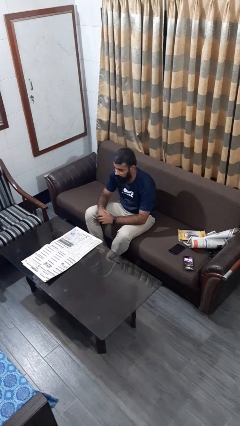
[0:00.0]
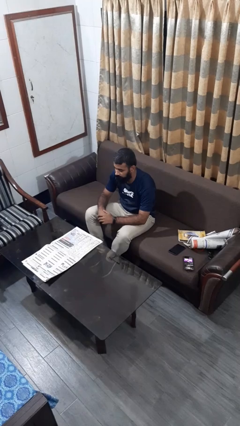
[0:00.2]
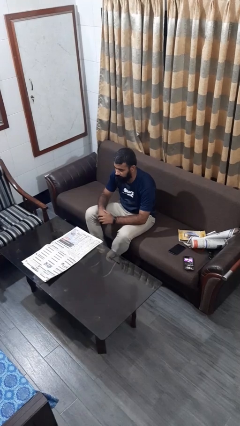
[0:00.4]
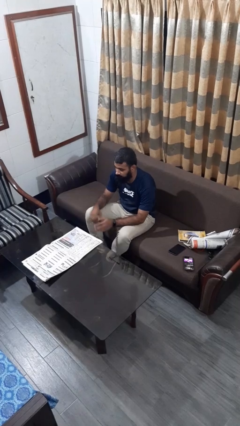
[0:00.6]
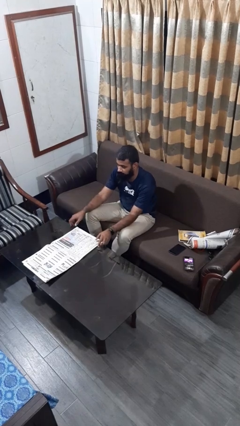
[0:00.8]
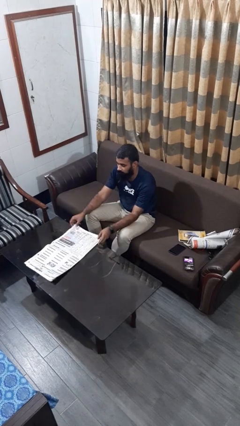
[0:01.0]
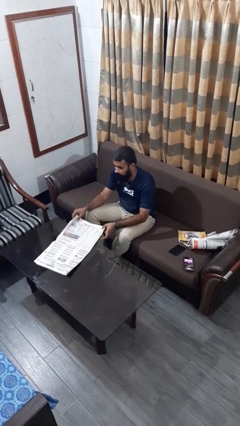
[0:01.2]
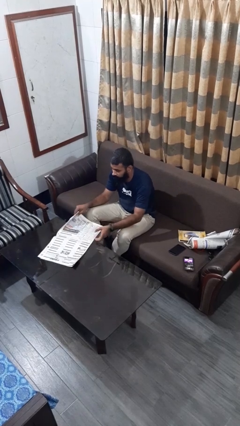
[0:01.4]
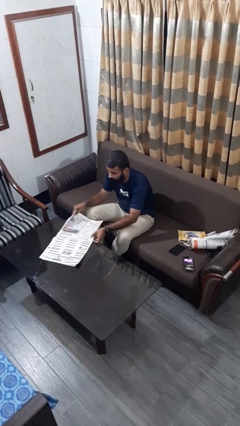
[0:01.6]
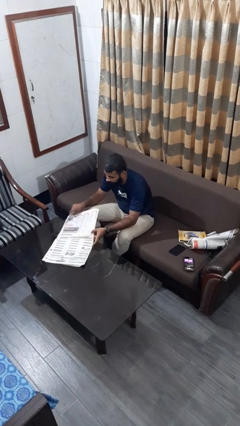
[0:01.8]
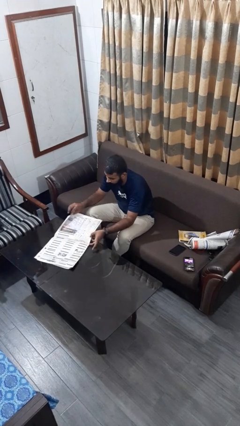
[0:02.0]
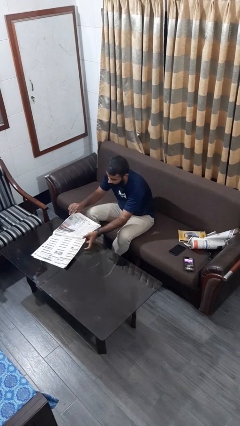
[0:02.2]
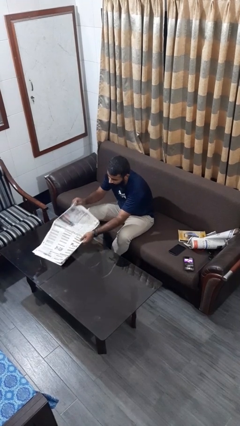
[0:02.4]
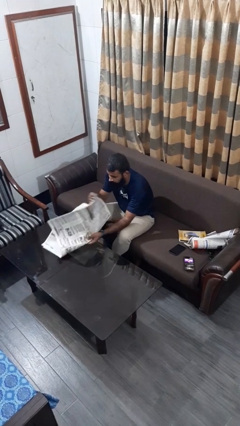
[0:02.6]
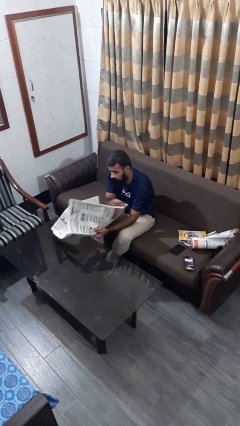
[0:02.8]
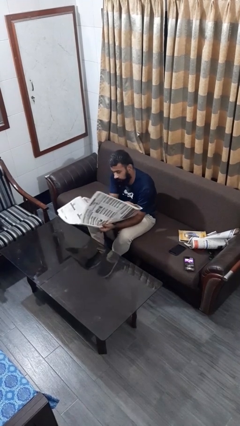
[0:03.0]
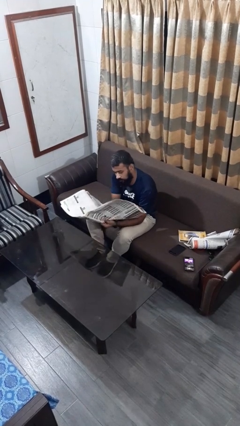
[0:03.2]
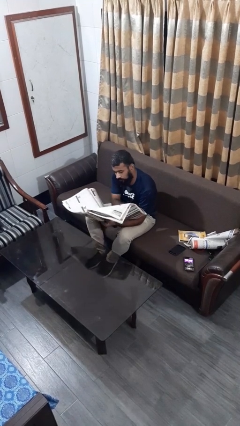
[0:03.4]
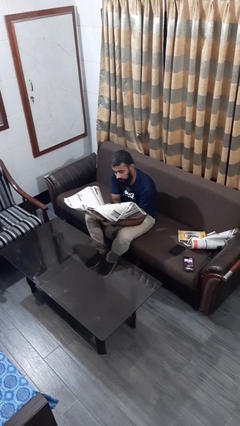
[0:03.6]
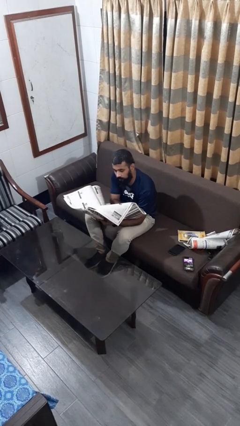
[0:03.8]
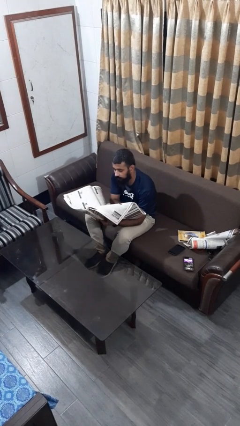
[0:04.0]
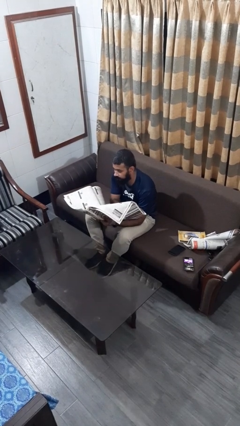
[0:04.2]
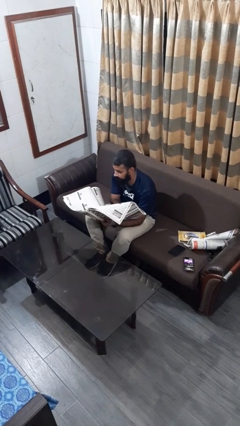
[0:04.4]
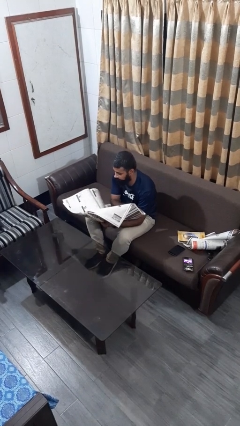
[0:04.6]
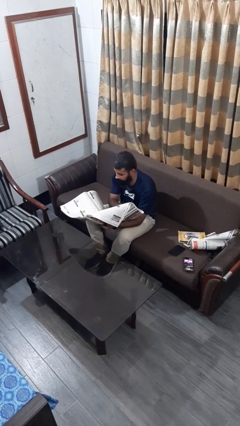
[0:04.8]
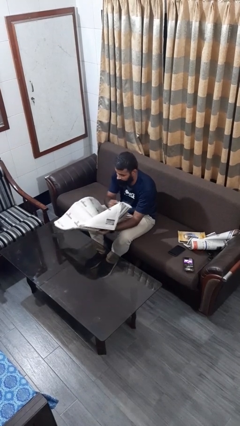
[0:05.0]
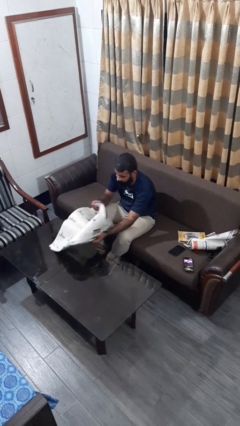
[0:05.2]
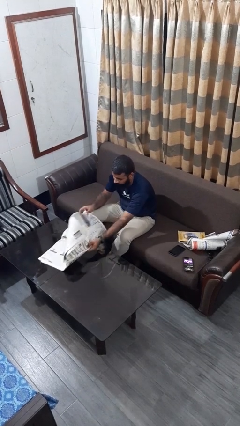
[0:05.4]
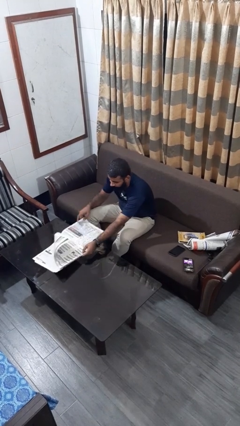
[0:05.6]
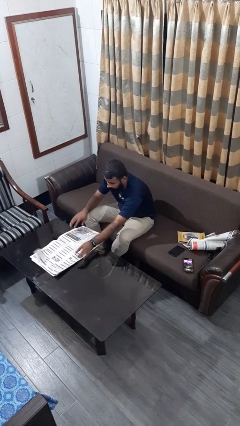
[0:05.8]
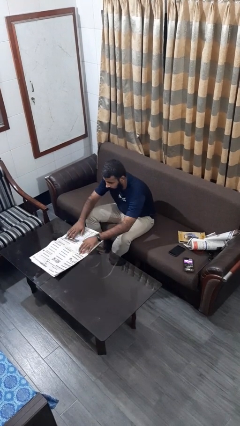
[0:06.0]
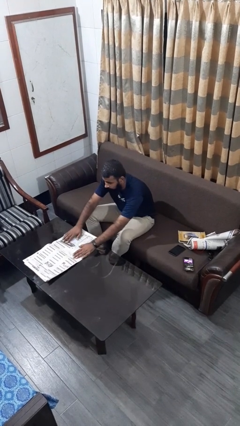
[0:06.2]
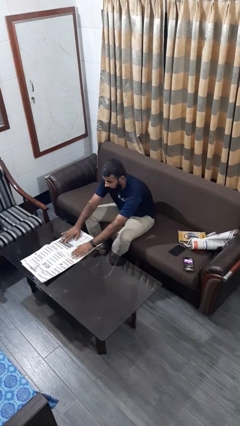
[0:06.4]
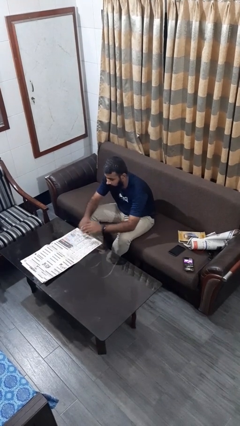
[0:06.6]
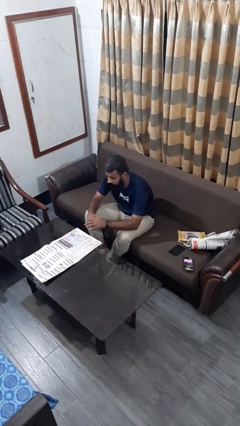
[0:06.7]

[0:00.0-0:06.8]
person reads newspaper

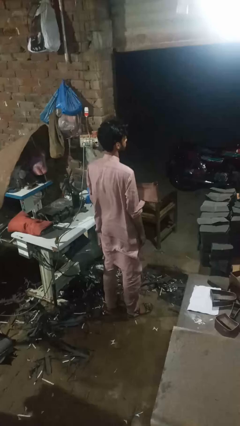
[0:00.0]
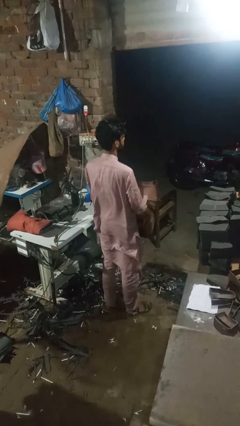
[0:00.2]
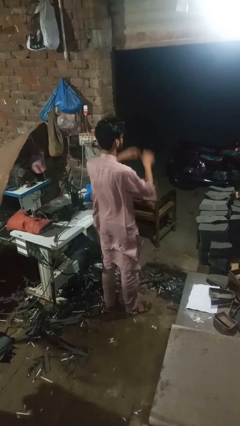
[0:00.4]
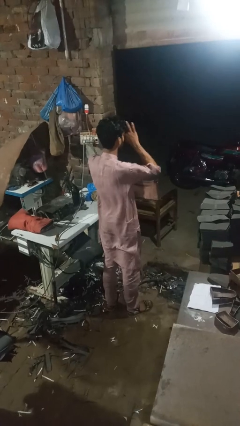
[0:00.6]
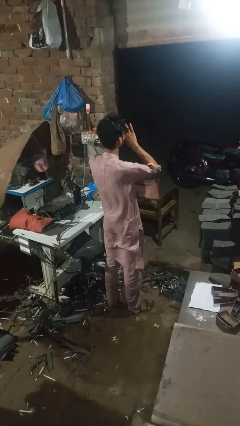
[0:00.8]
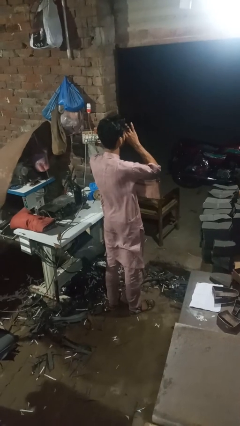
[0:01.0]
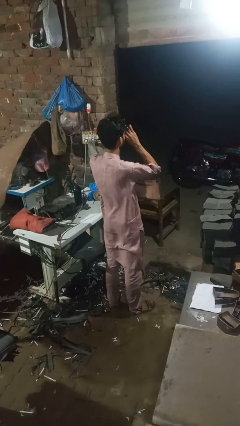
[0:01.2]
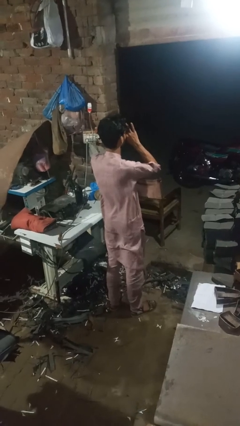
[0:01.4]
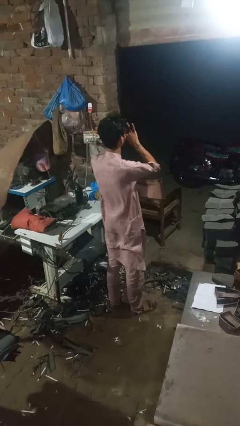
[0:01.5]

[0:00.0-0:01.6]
person rubs eyes

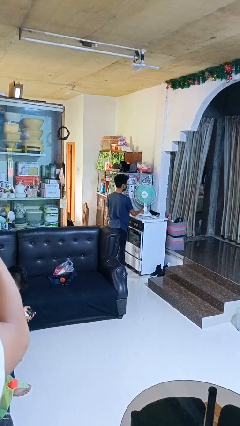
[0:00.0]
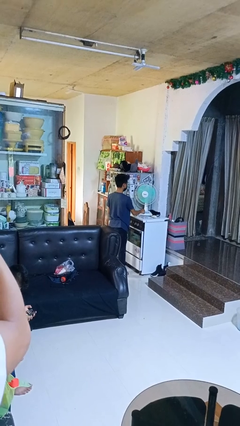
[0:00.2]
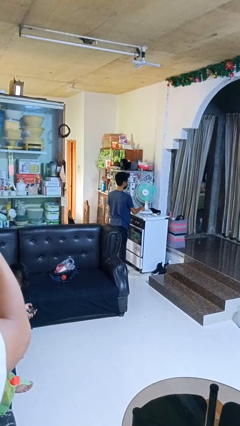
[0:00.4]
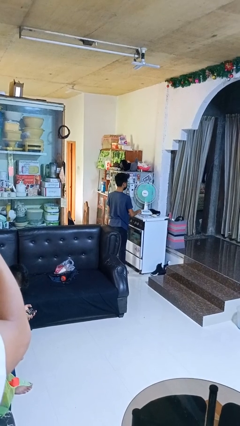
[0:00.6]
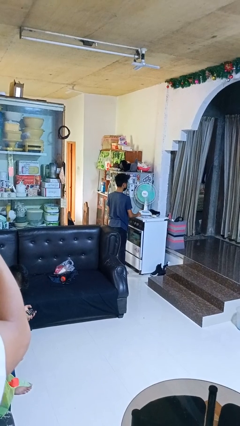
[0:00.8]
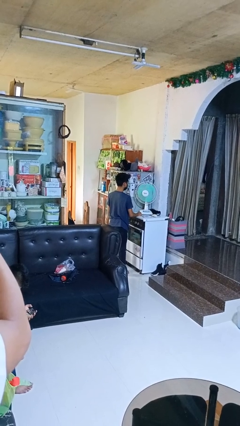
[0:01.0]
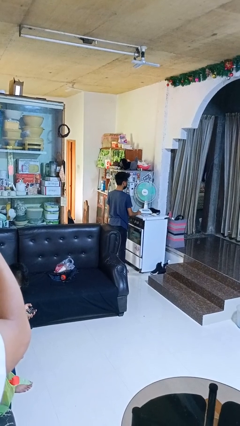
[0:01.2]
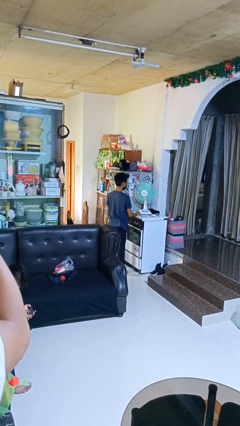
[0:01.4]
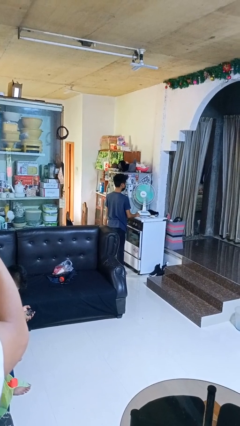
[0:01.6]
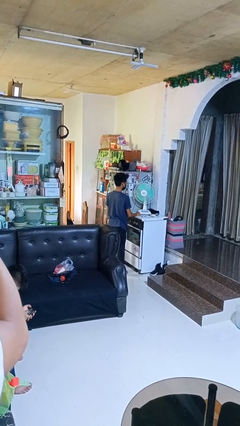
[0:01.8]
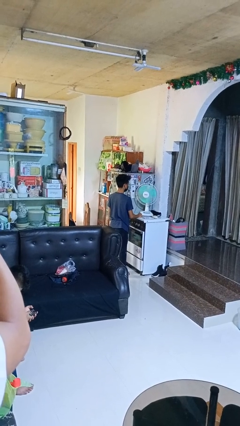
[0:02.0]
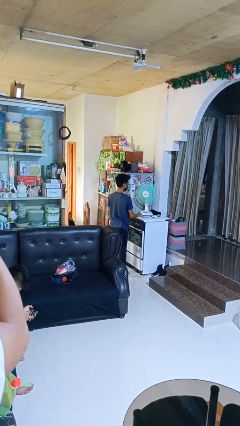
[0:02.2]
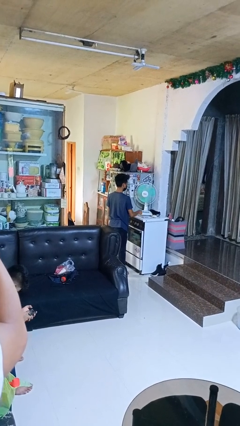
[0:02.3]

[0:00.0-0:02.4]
person turns on fan

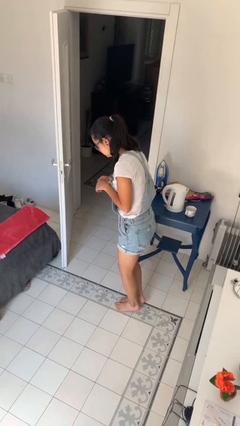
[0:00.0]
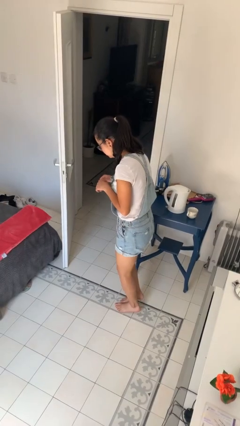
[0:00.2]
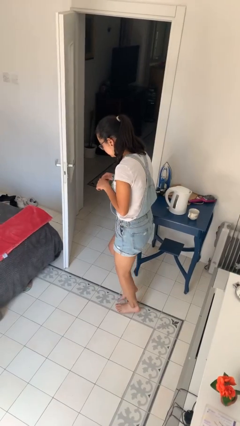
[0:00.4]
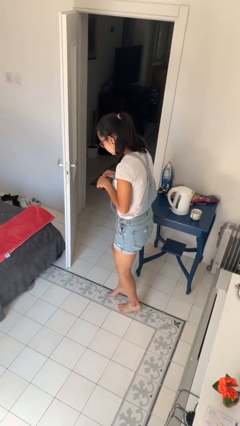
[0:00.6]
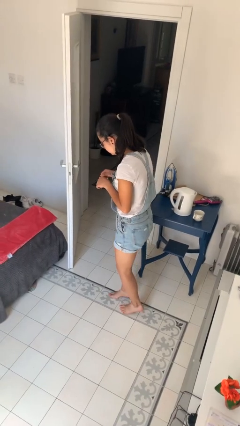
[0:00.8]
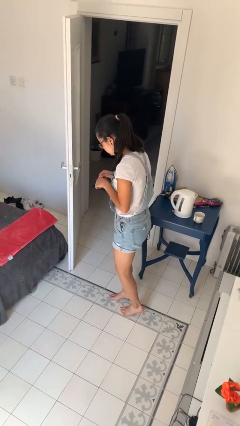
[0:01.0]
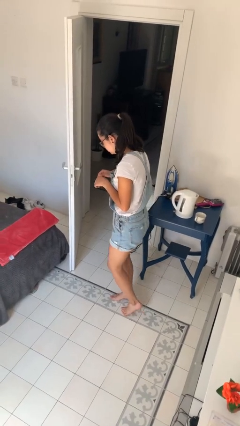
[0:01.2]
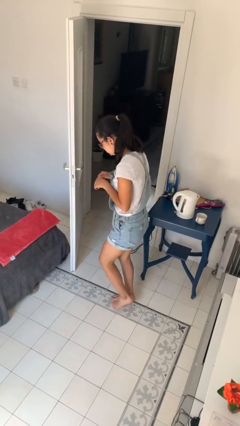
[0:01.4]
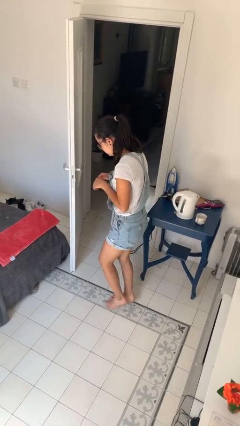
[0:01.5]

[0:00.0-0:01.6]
person walks tiptoe

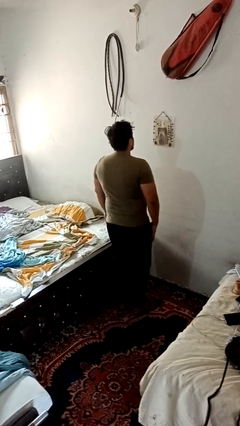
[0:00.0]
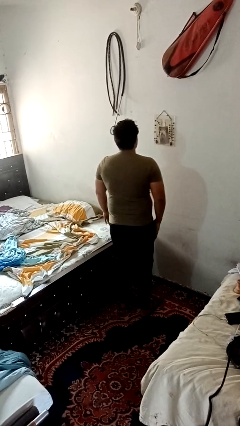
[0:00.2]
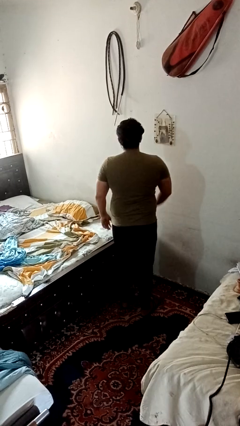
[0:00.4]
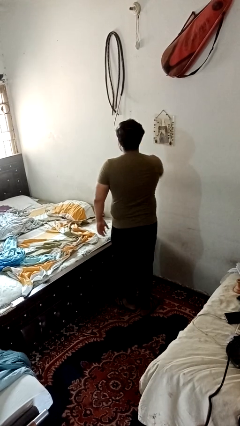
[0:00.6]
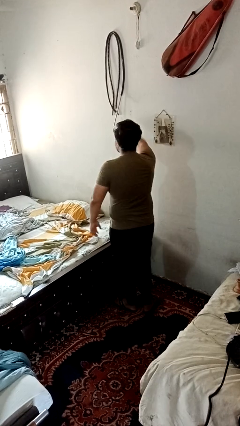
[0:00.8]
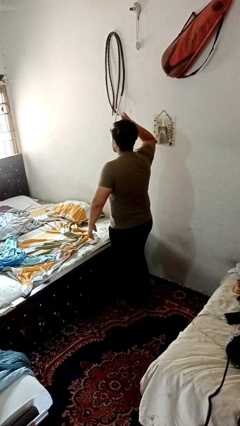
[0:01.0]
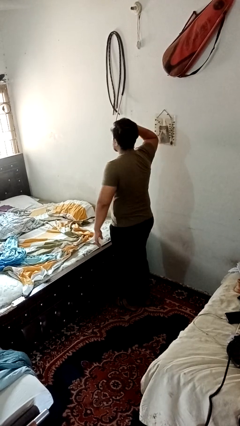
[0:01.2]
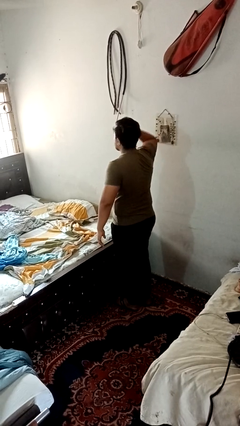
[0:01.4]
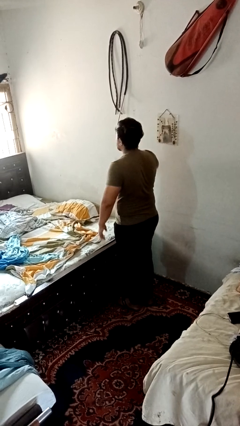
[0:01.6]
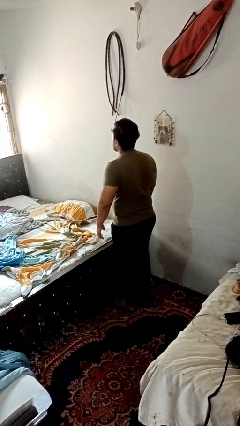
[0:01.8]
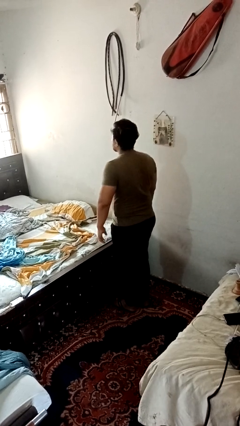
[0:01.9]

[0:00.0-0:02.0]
person salutes

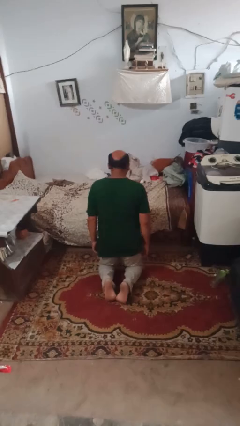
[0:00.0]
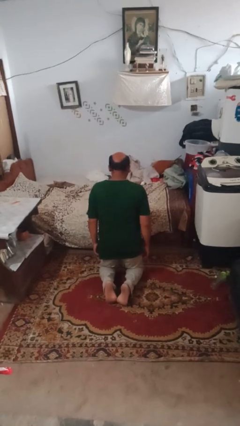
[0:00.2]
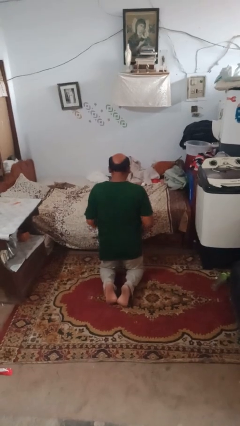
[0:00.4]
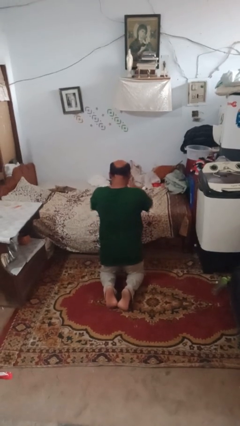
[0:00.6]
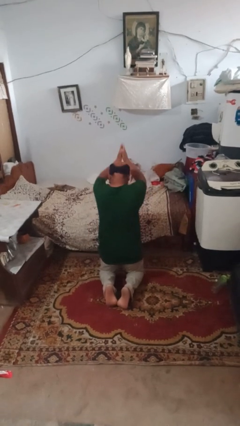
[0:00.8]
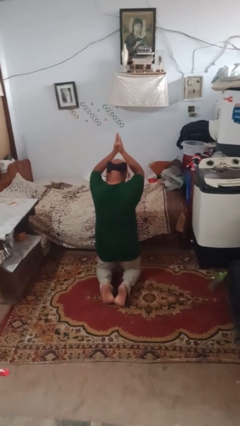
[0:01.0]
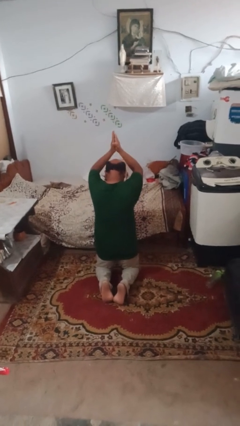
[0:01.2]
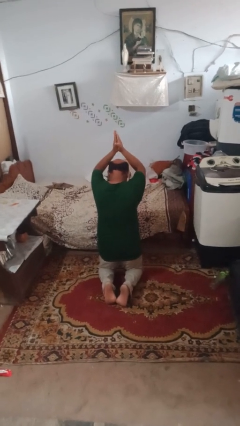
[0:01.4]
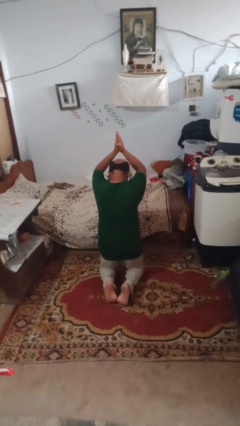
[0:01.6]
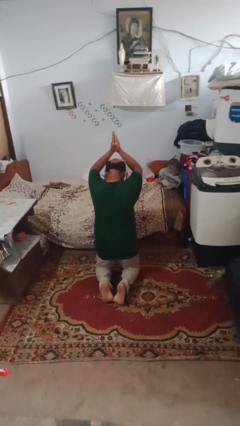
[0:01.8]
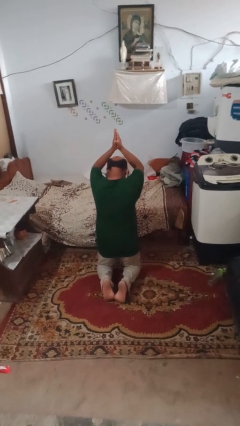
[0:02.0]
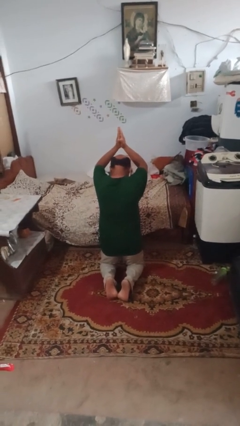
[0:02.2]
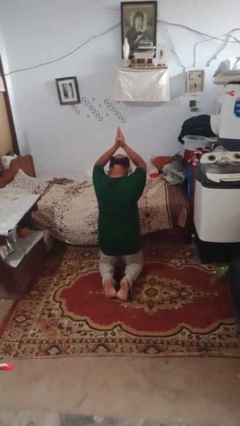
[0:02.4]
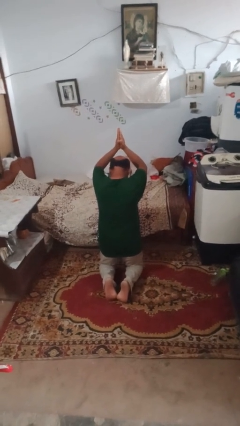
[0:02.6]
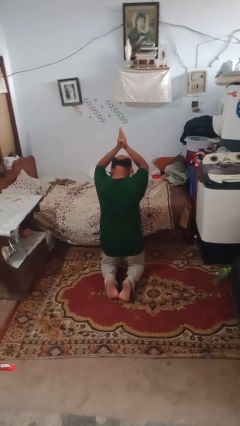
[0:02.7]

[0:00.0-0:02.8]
person prays

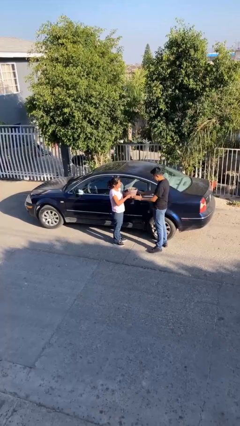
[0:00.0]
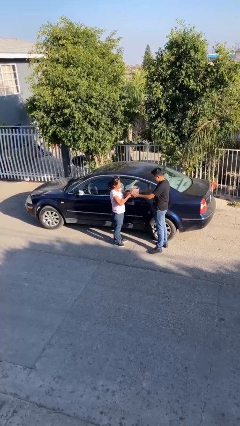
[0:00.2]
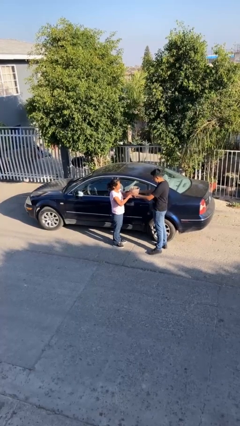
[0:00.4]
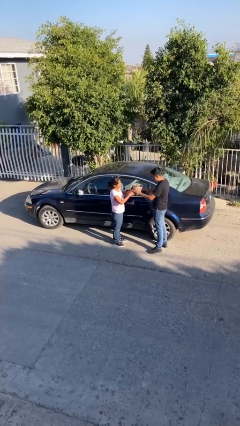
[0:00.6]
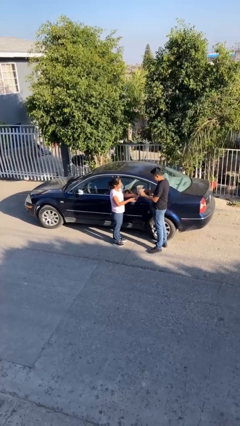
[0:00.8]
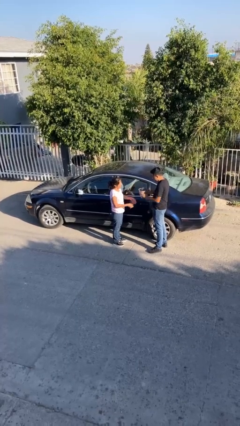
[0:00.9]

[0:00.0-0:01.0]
person transfers object to person
